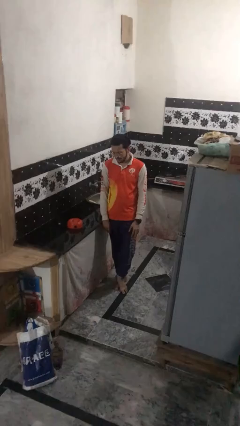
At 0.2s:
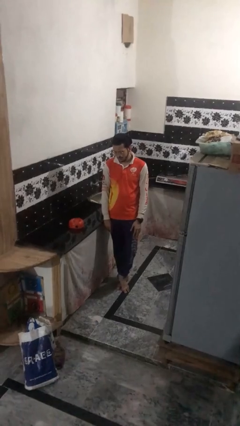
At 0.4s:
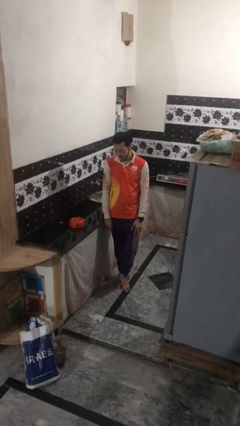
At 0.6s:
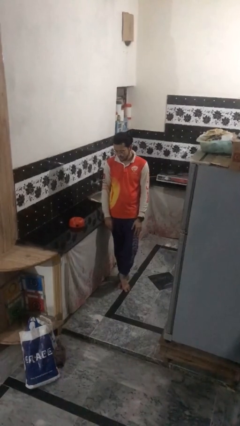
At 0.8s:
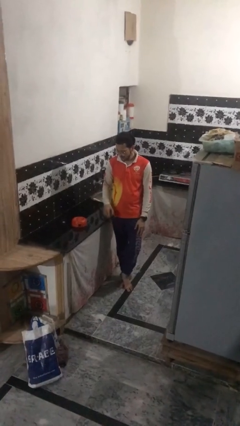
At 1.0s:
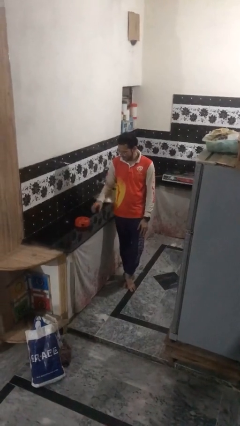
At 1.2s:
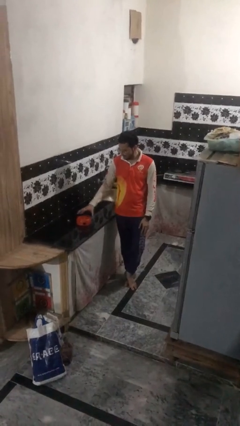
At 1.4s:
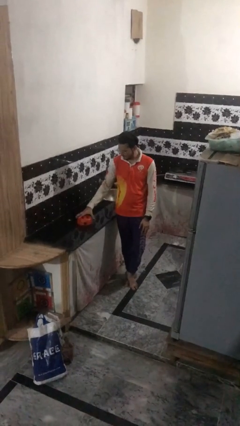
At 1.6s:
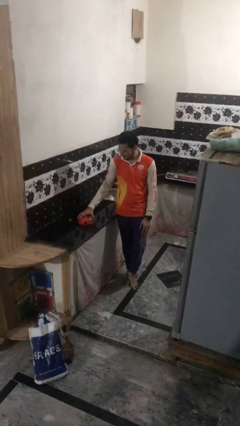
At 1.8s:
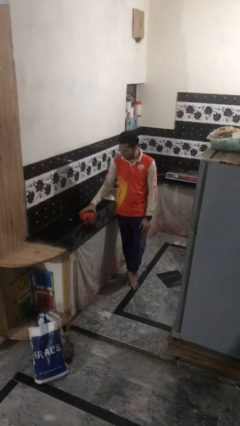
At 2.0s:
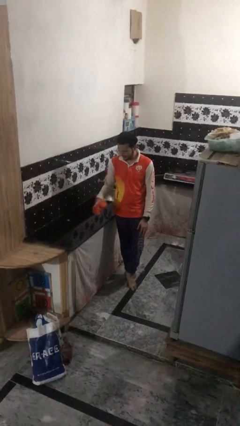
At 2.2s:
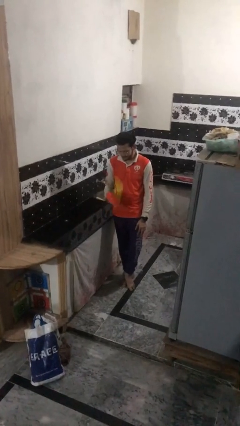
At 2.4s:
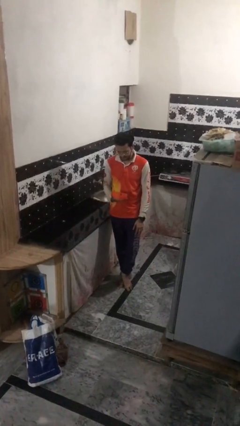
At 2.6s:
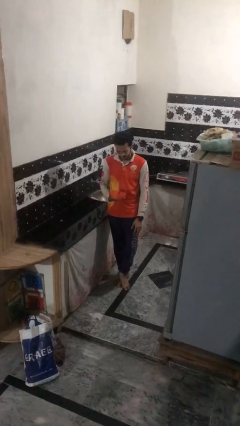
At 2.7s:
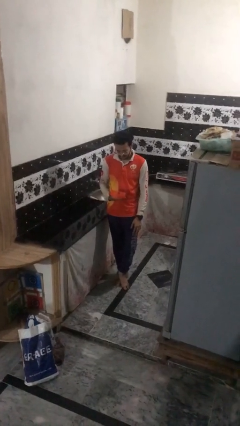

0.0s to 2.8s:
person picks up object from countertop

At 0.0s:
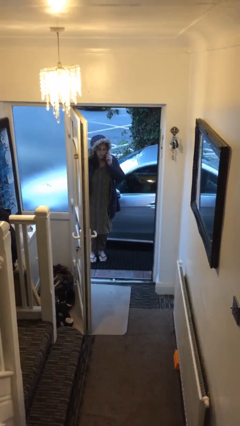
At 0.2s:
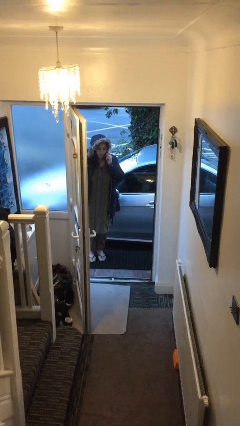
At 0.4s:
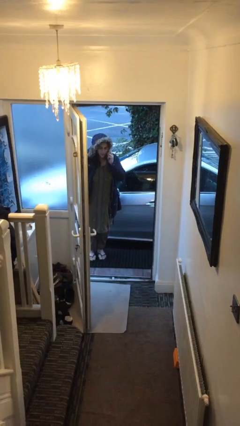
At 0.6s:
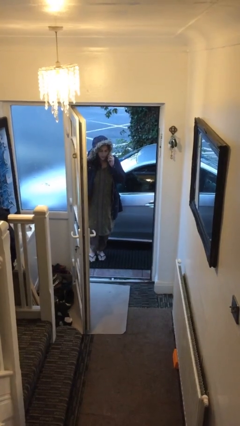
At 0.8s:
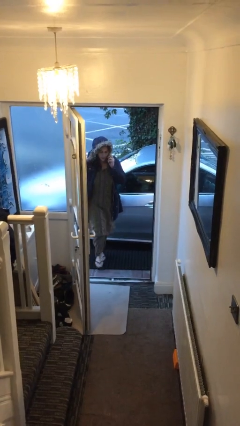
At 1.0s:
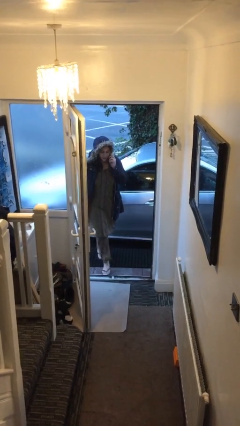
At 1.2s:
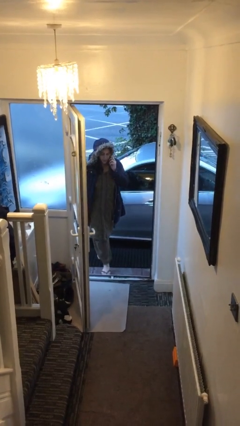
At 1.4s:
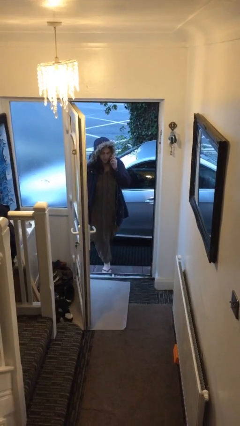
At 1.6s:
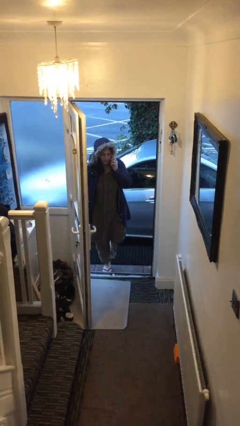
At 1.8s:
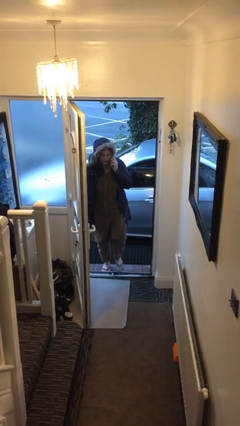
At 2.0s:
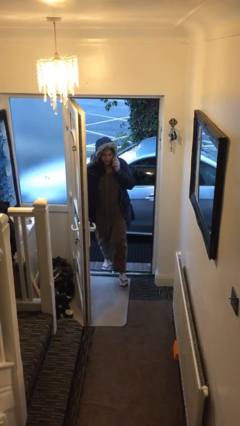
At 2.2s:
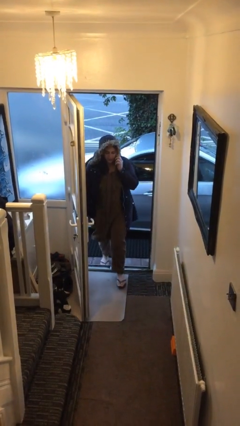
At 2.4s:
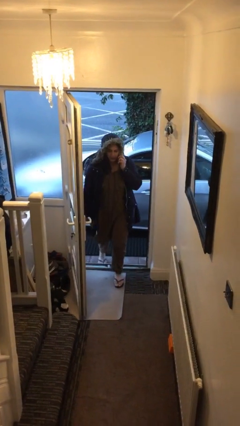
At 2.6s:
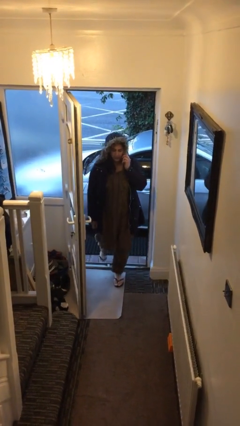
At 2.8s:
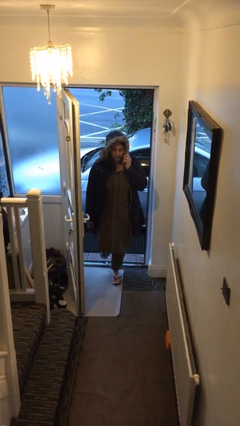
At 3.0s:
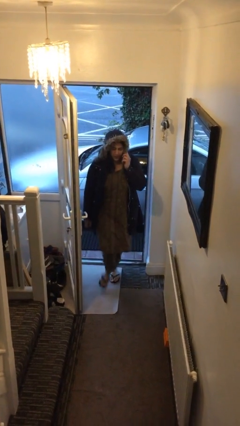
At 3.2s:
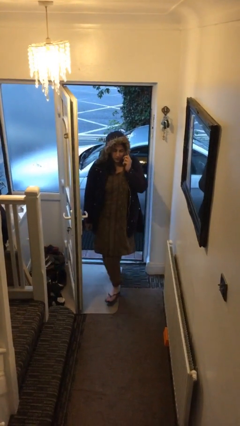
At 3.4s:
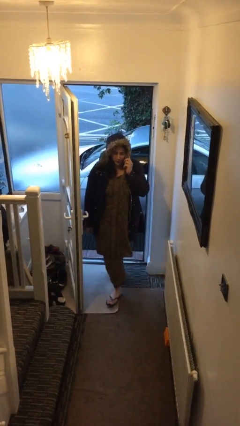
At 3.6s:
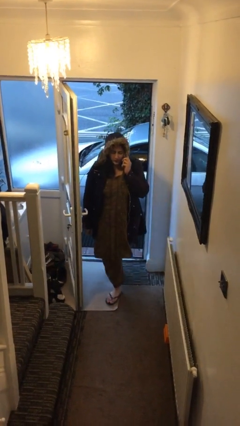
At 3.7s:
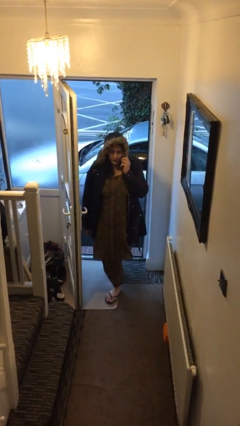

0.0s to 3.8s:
person enters scene through structure

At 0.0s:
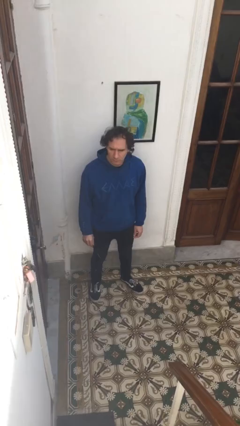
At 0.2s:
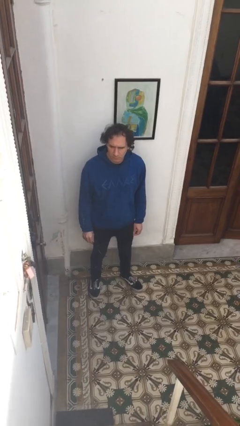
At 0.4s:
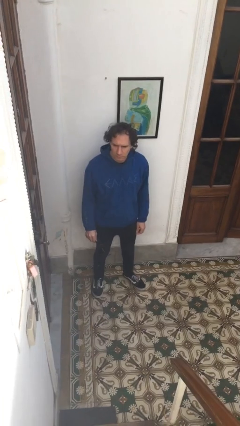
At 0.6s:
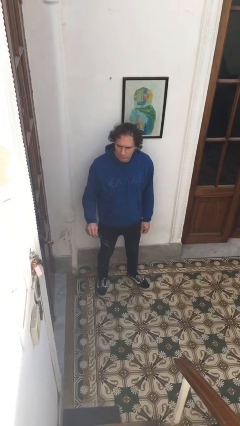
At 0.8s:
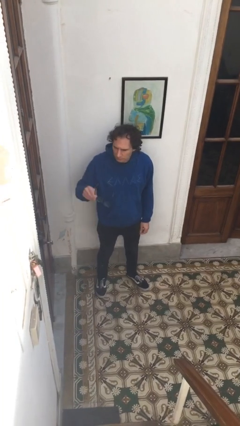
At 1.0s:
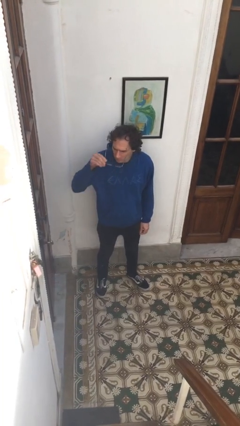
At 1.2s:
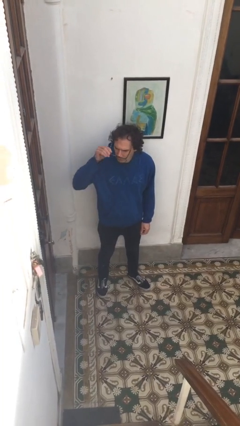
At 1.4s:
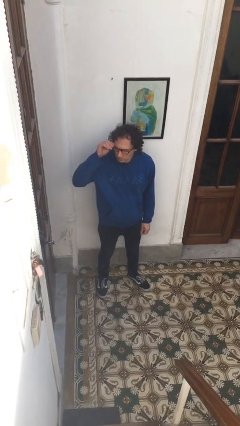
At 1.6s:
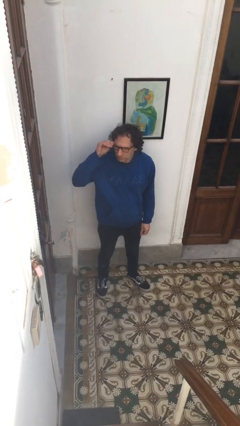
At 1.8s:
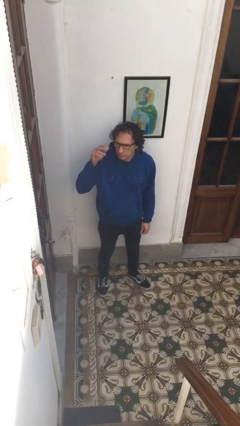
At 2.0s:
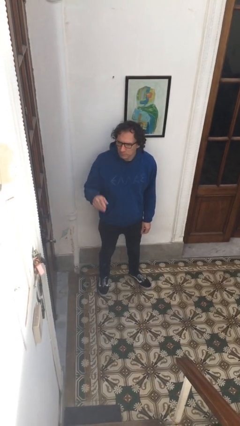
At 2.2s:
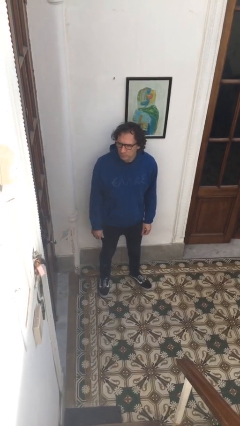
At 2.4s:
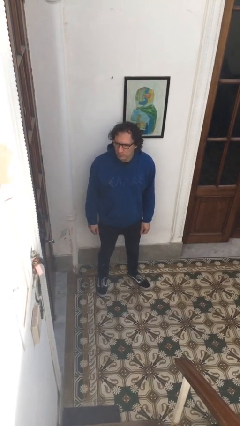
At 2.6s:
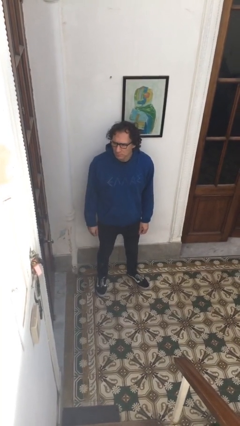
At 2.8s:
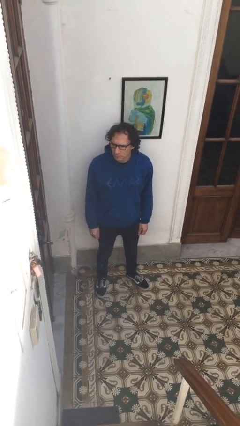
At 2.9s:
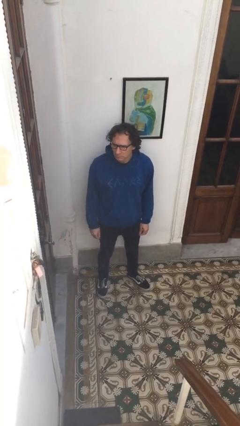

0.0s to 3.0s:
person puts on glasses

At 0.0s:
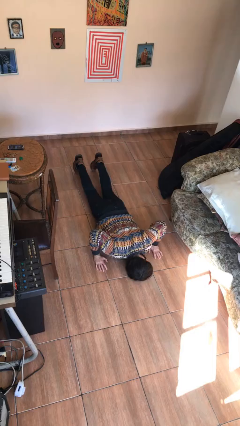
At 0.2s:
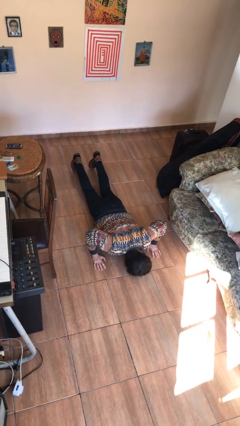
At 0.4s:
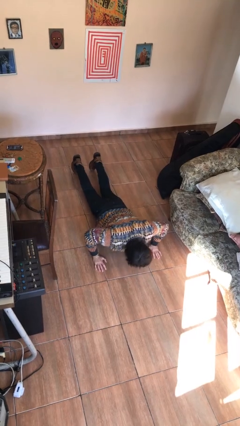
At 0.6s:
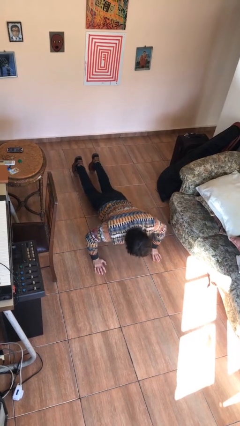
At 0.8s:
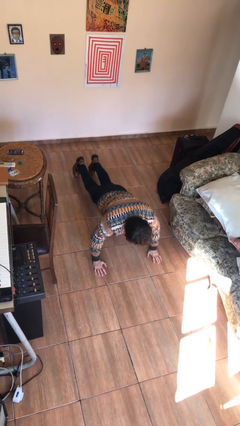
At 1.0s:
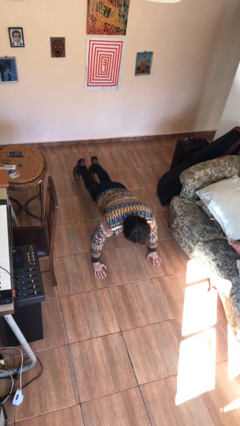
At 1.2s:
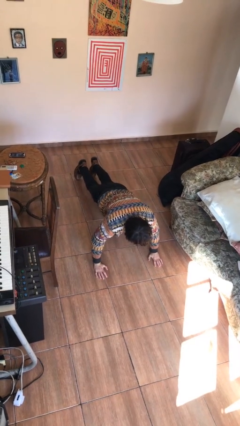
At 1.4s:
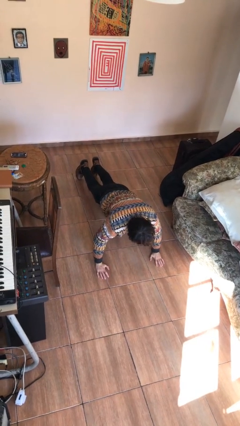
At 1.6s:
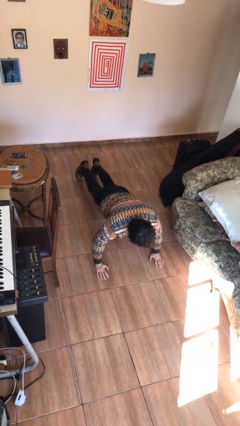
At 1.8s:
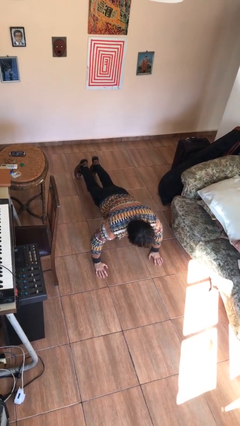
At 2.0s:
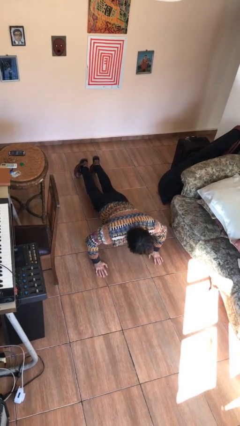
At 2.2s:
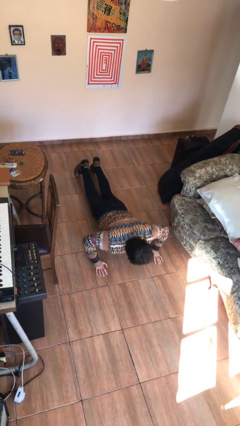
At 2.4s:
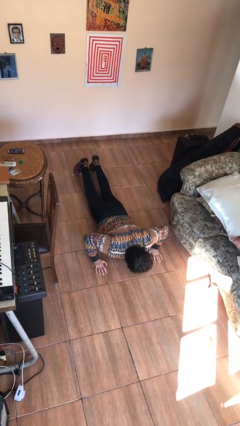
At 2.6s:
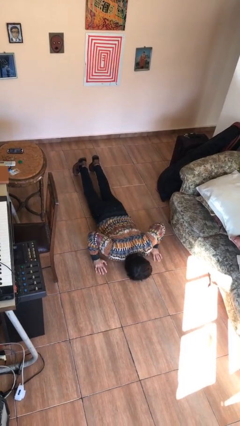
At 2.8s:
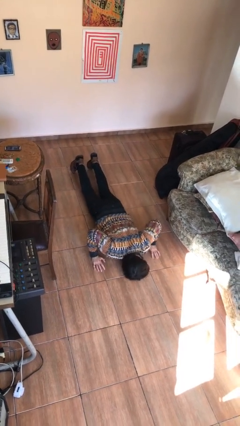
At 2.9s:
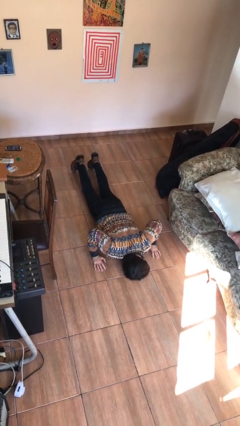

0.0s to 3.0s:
person exercises with pushup

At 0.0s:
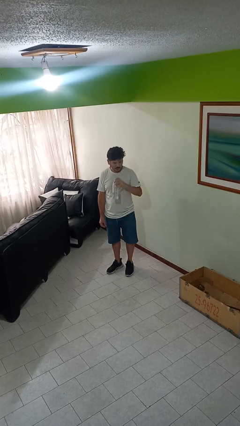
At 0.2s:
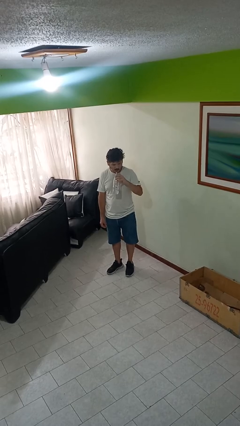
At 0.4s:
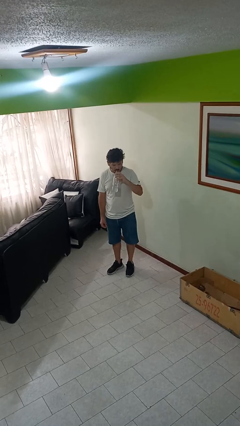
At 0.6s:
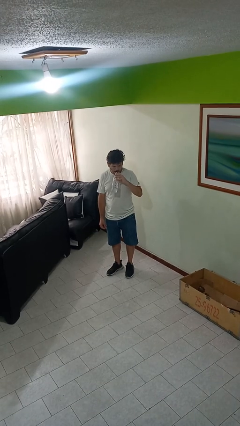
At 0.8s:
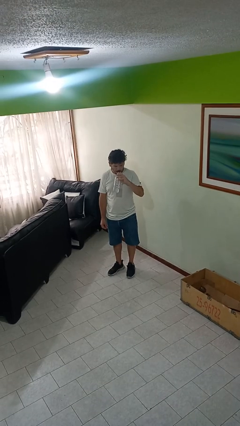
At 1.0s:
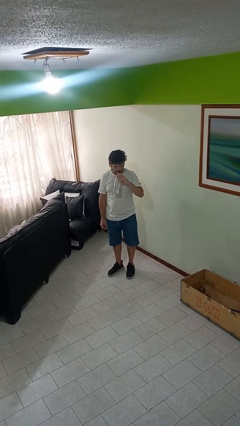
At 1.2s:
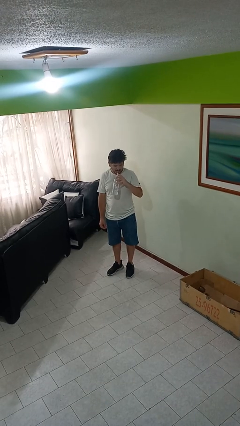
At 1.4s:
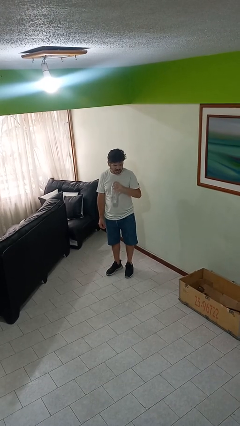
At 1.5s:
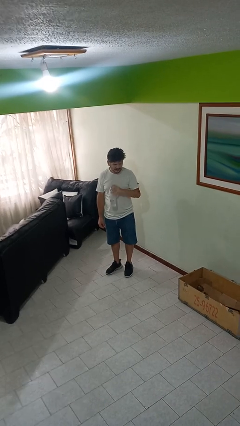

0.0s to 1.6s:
person drinks from straw

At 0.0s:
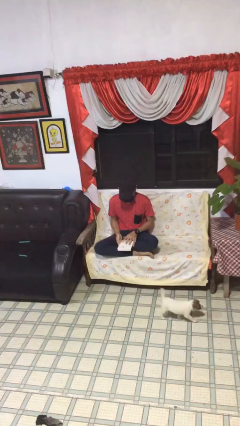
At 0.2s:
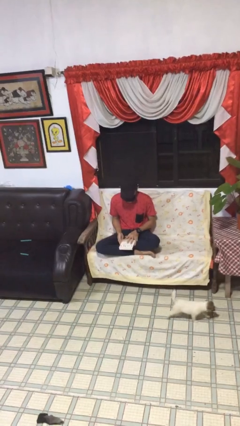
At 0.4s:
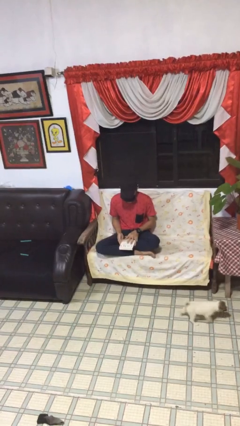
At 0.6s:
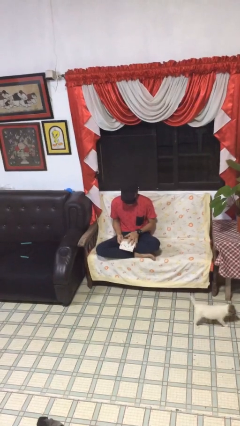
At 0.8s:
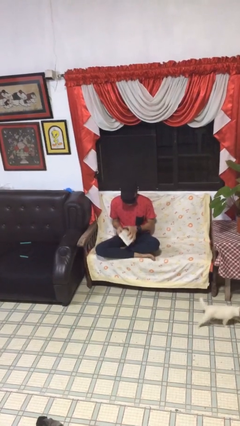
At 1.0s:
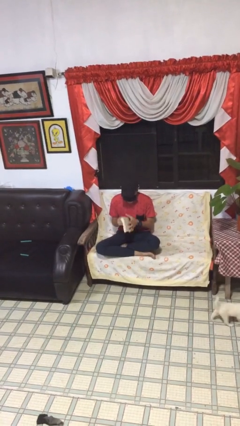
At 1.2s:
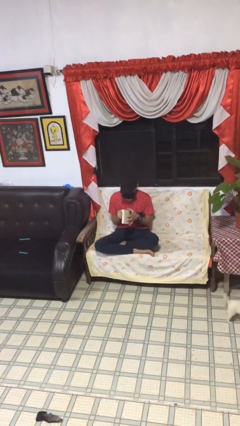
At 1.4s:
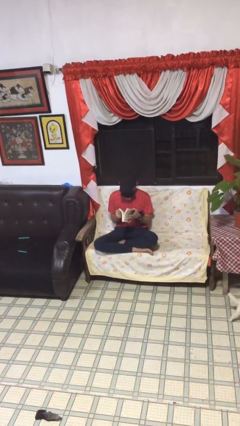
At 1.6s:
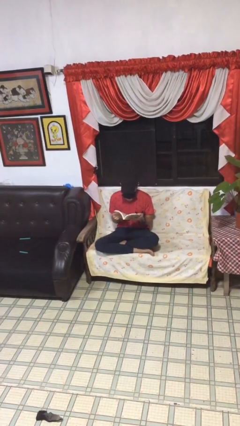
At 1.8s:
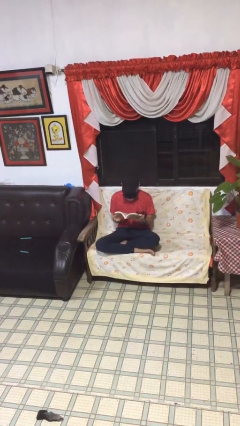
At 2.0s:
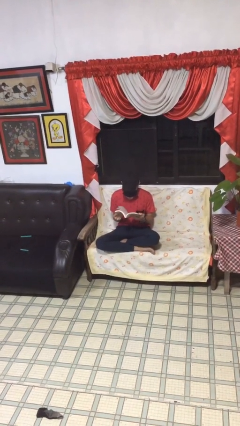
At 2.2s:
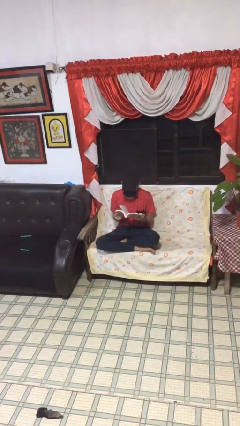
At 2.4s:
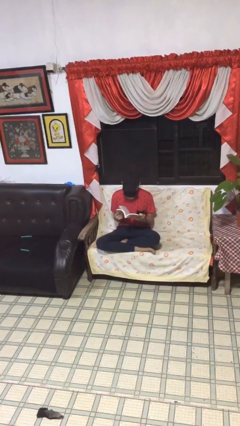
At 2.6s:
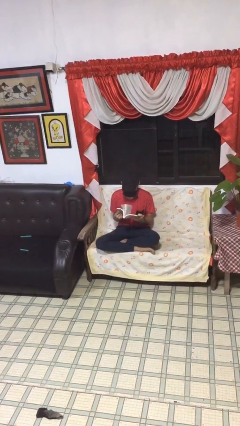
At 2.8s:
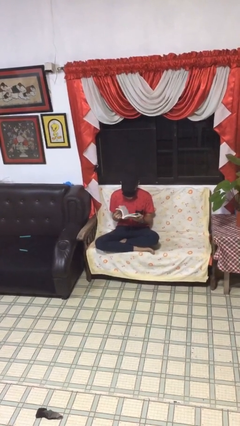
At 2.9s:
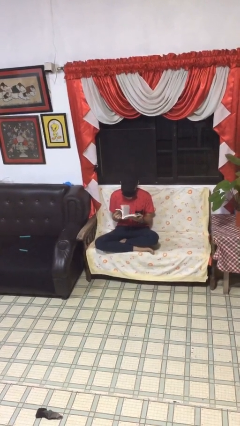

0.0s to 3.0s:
person reads document
